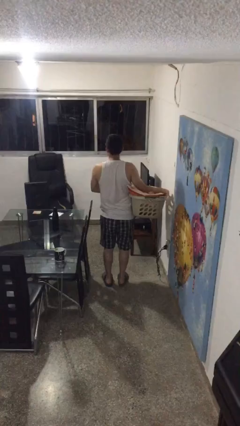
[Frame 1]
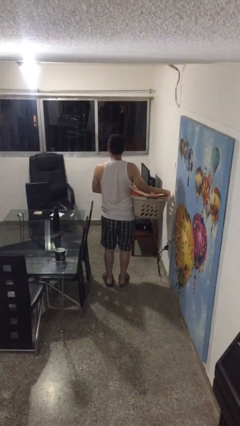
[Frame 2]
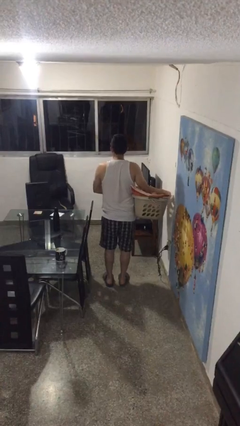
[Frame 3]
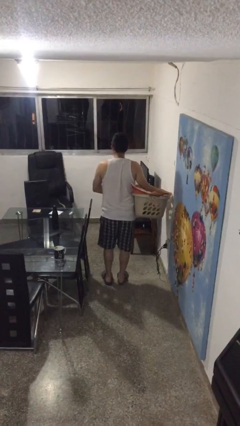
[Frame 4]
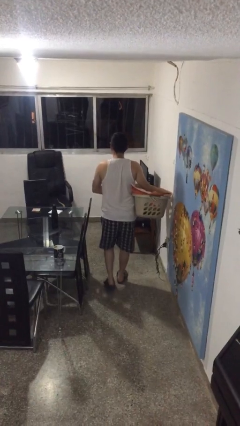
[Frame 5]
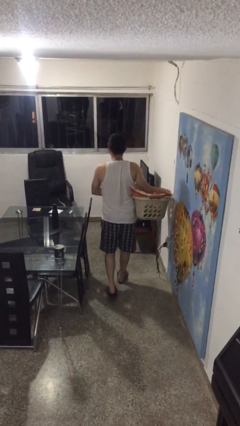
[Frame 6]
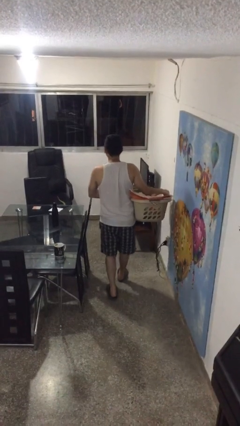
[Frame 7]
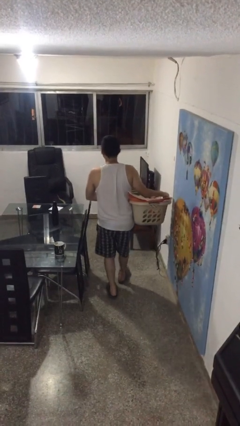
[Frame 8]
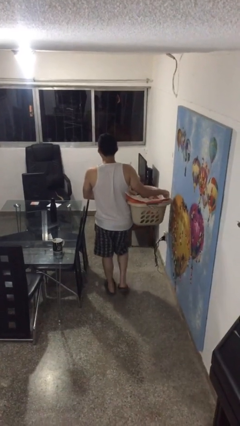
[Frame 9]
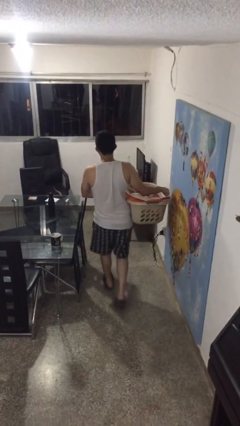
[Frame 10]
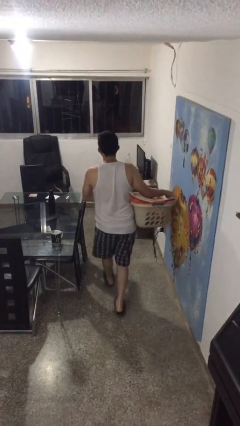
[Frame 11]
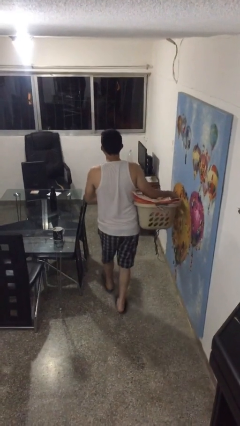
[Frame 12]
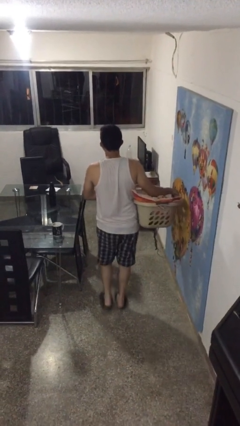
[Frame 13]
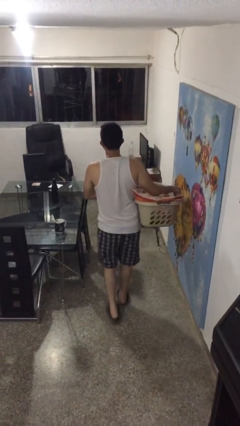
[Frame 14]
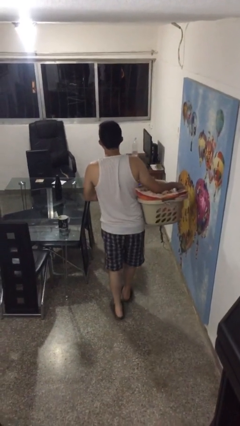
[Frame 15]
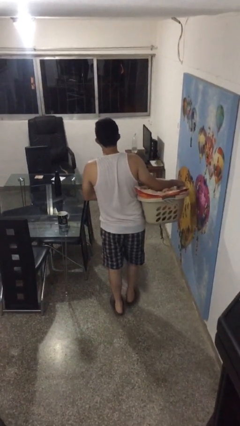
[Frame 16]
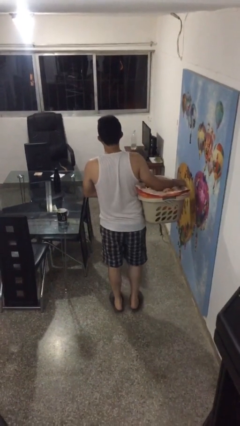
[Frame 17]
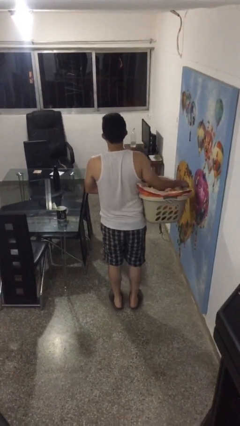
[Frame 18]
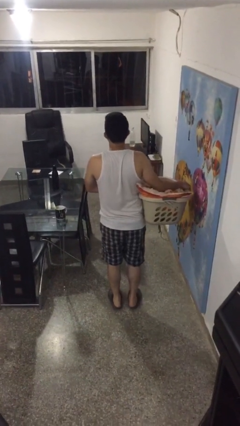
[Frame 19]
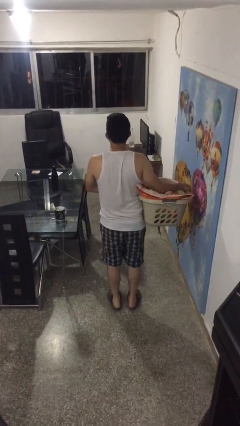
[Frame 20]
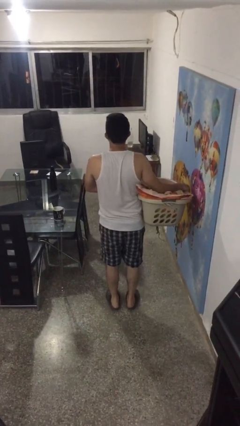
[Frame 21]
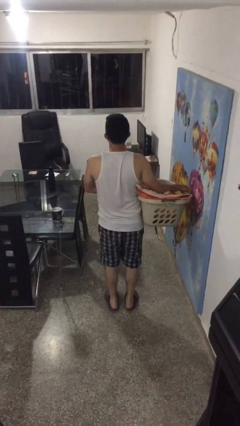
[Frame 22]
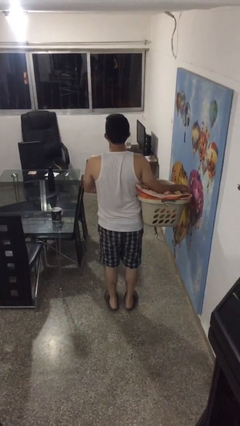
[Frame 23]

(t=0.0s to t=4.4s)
person carries laundry basket

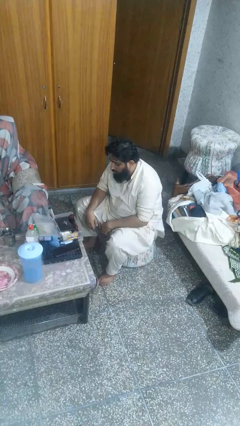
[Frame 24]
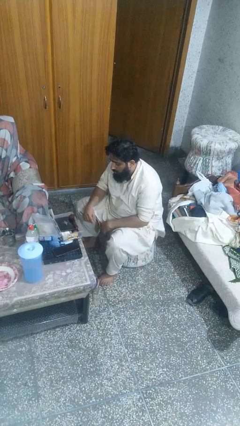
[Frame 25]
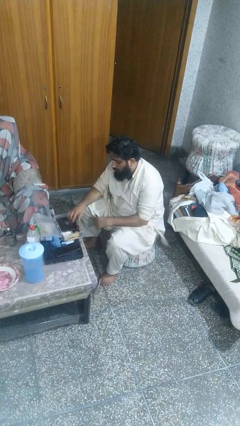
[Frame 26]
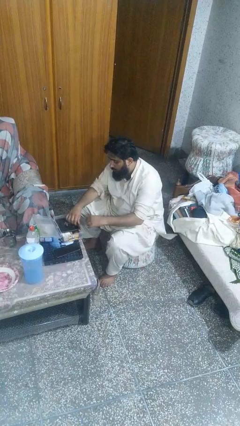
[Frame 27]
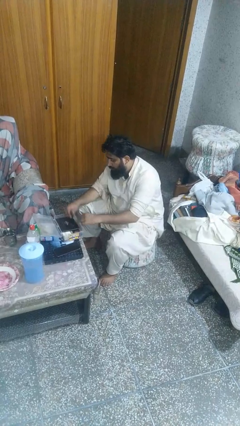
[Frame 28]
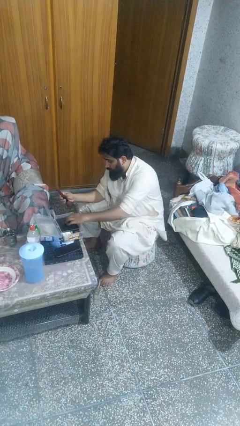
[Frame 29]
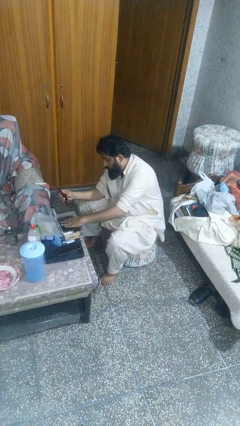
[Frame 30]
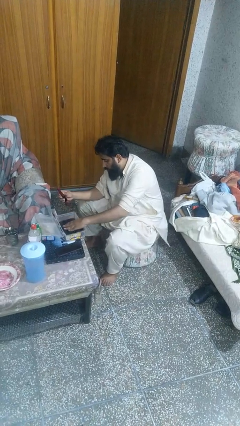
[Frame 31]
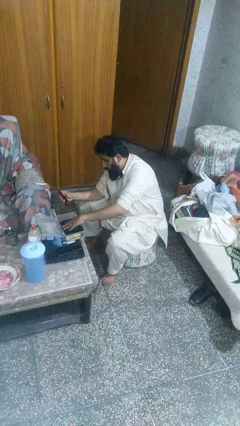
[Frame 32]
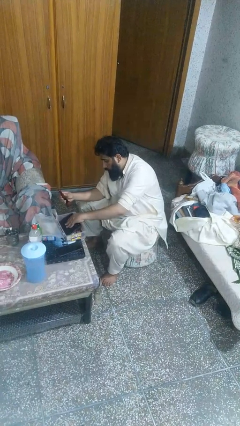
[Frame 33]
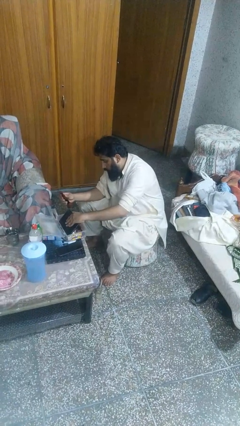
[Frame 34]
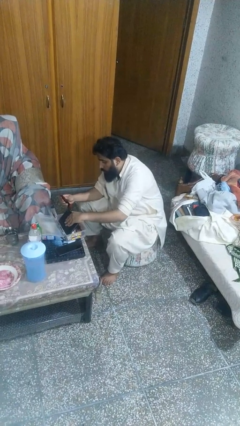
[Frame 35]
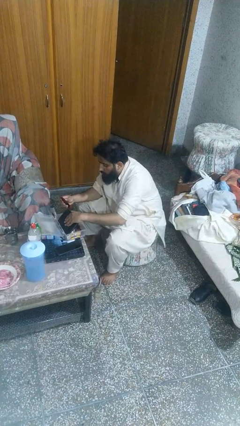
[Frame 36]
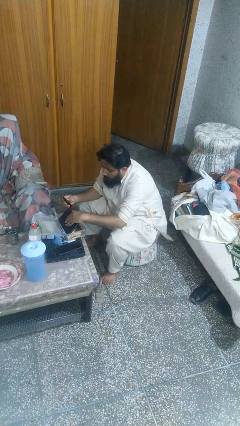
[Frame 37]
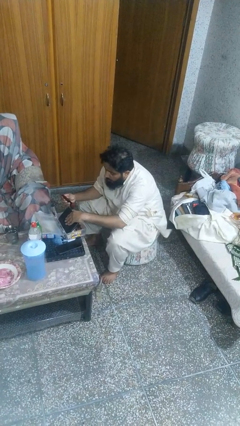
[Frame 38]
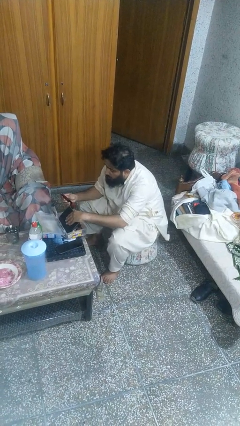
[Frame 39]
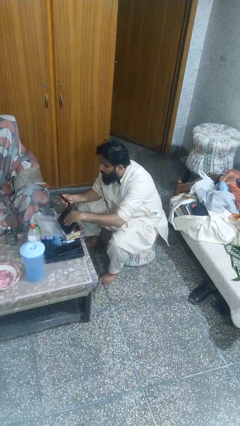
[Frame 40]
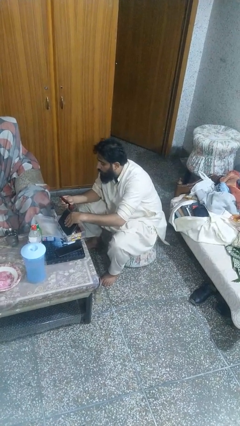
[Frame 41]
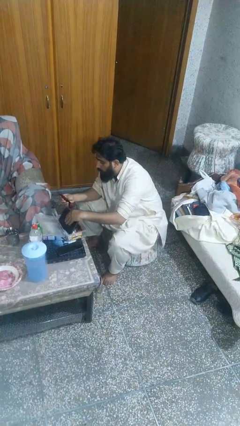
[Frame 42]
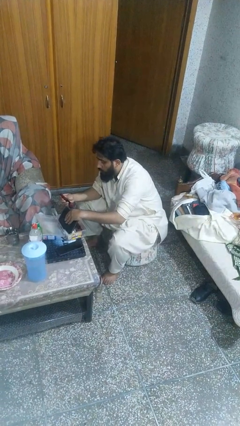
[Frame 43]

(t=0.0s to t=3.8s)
person searches jewelry box

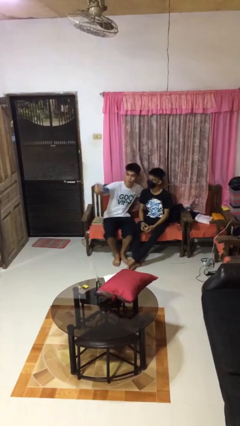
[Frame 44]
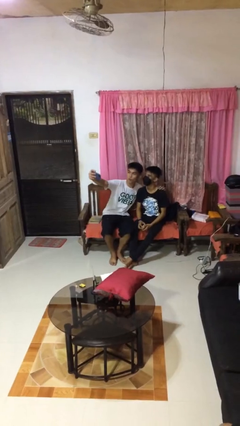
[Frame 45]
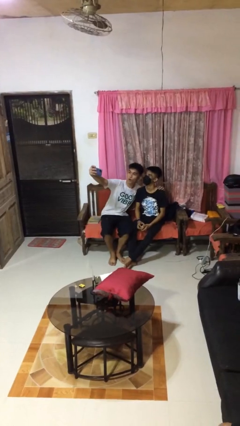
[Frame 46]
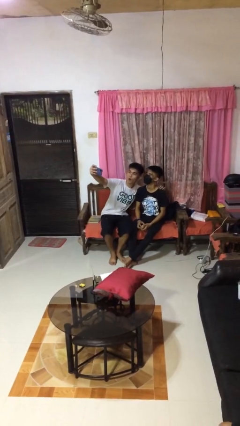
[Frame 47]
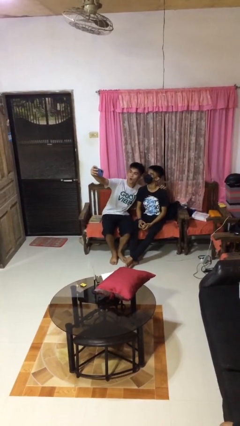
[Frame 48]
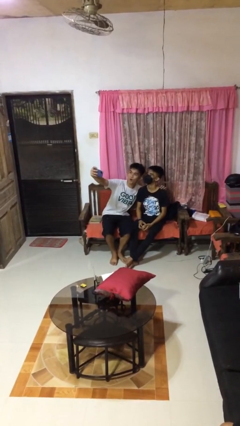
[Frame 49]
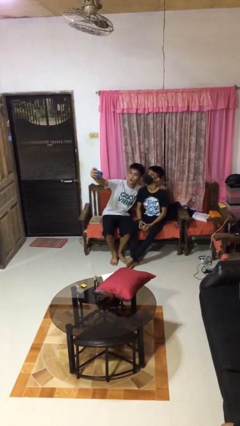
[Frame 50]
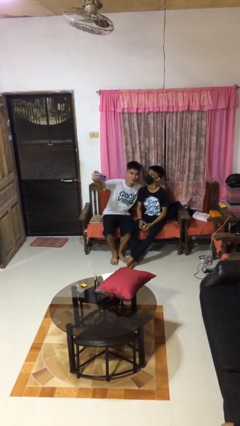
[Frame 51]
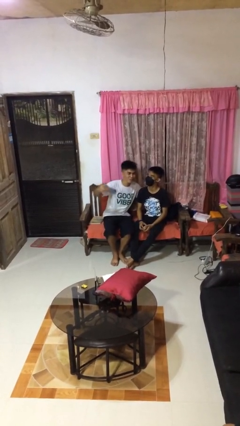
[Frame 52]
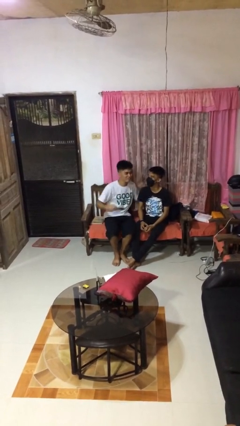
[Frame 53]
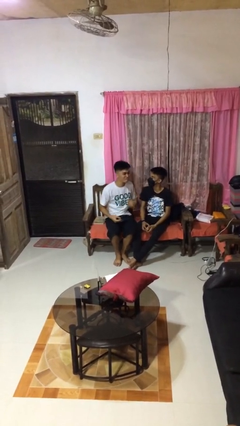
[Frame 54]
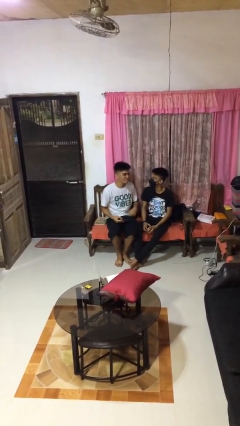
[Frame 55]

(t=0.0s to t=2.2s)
person takes selfie with person

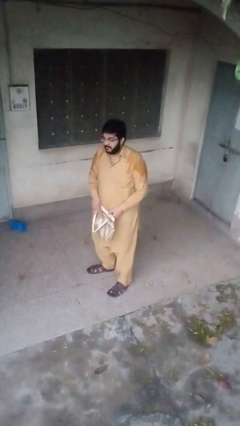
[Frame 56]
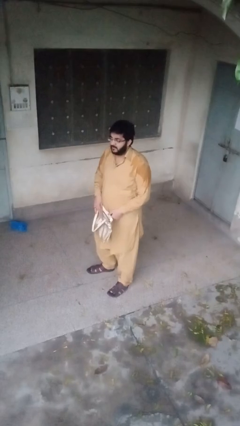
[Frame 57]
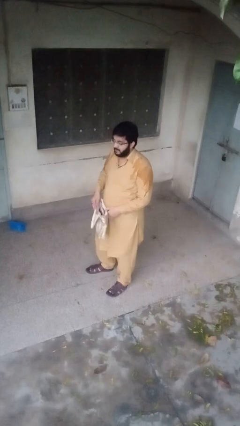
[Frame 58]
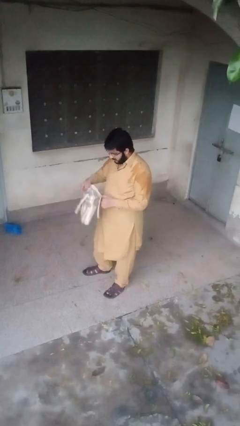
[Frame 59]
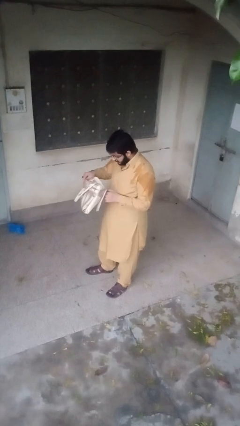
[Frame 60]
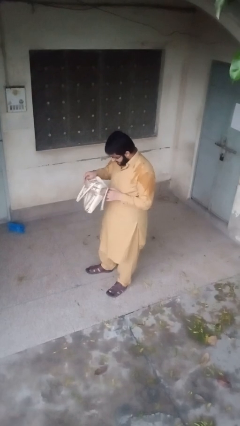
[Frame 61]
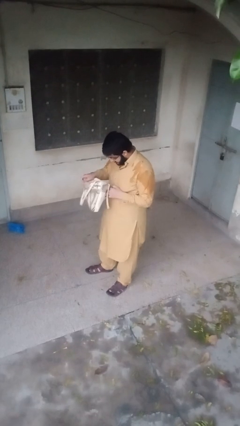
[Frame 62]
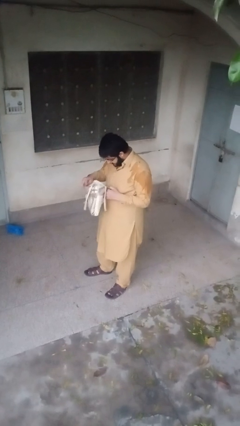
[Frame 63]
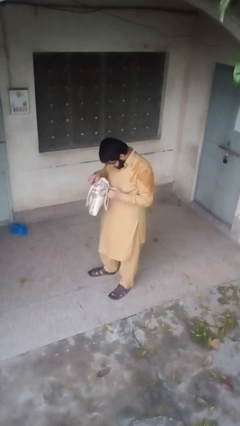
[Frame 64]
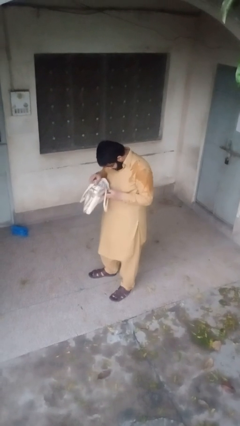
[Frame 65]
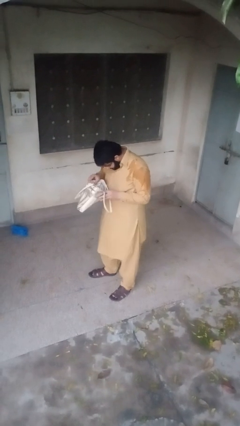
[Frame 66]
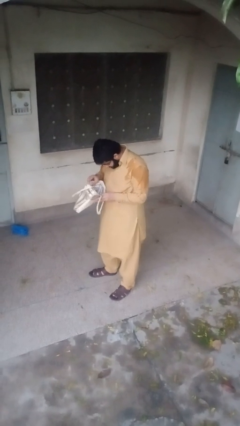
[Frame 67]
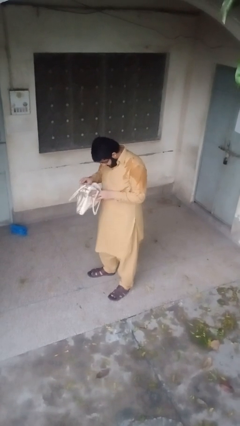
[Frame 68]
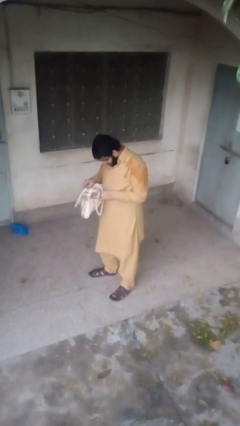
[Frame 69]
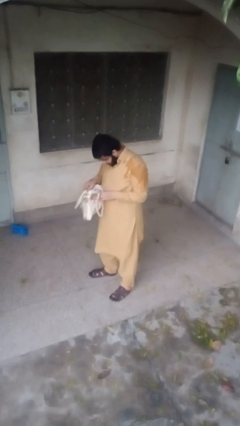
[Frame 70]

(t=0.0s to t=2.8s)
person searches in purse

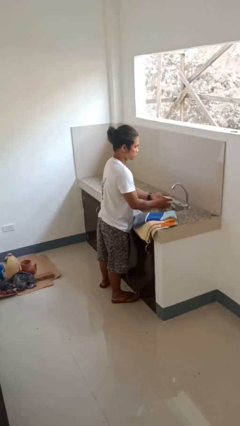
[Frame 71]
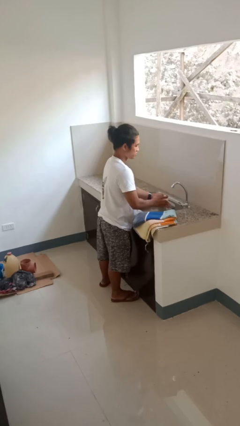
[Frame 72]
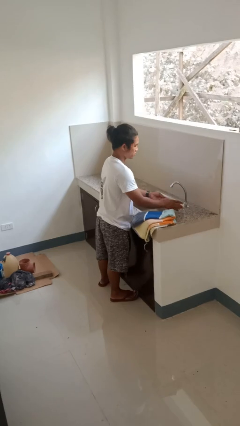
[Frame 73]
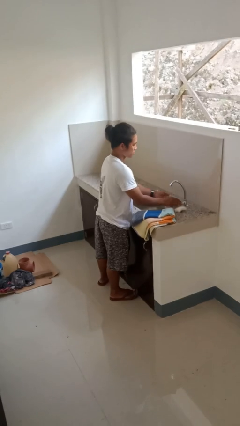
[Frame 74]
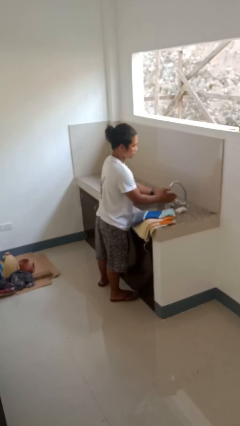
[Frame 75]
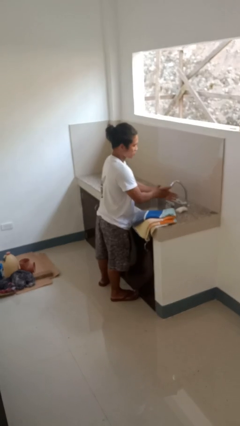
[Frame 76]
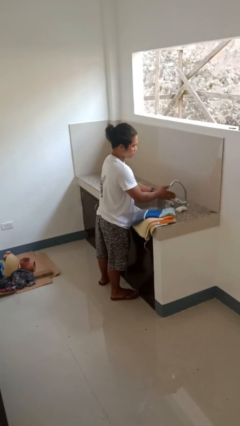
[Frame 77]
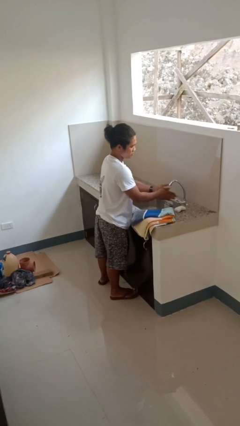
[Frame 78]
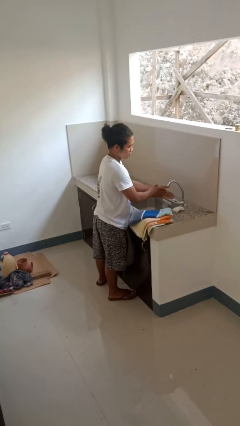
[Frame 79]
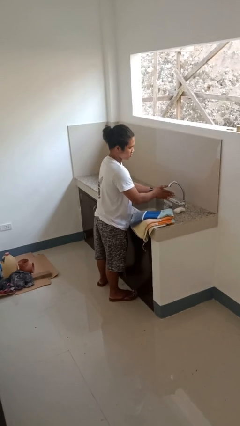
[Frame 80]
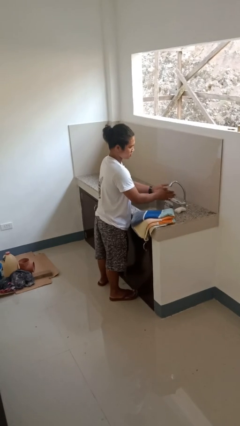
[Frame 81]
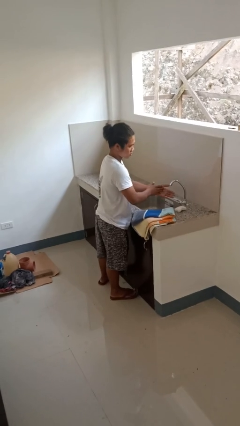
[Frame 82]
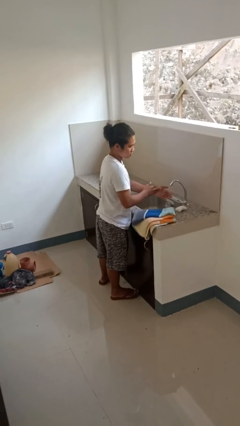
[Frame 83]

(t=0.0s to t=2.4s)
person washes hands

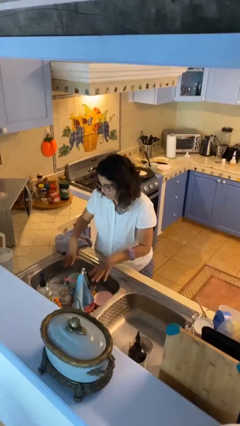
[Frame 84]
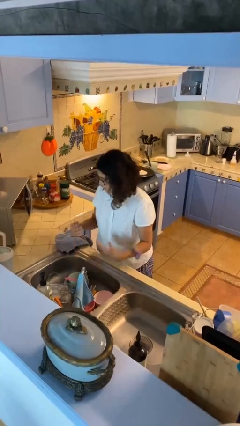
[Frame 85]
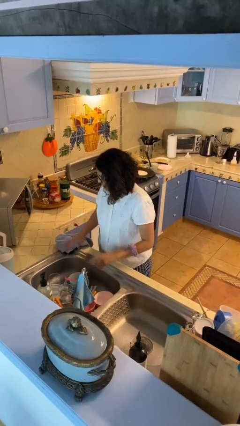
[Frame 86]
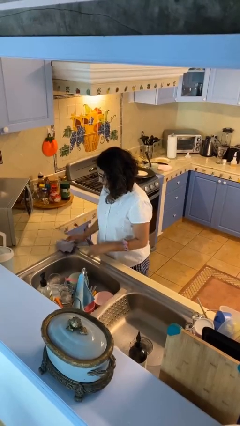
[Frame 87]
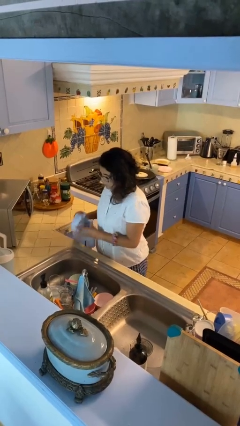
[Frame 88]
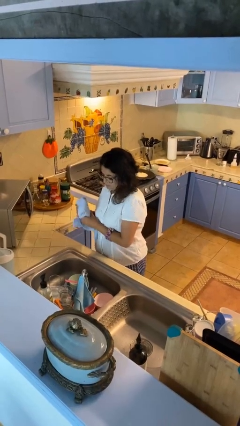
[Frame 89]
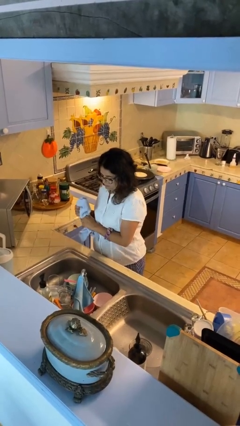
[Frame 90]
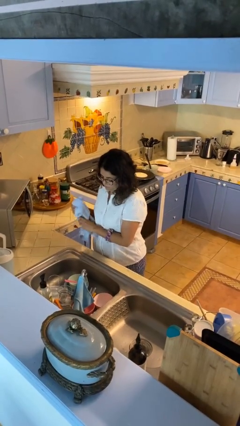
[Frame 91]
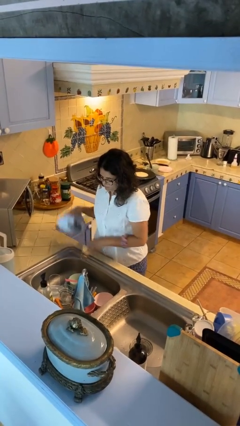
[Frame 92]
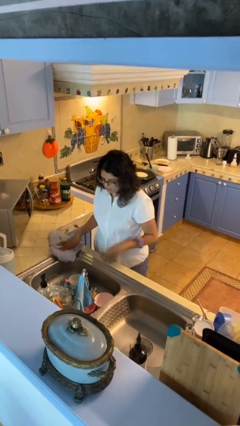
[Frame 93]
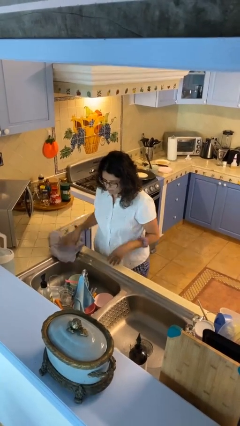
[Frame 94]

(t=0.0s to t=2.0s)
person dries hands with towel
